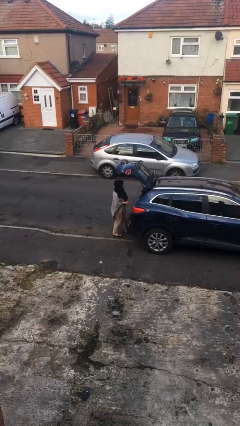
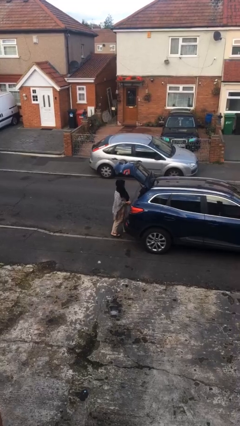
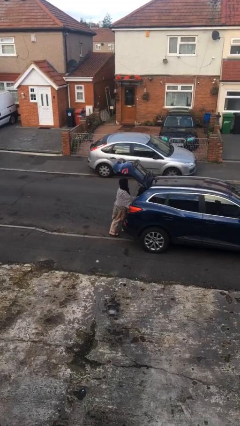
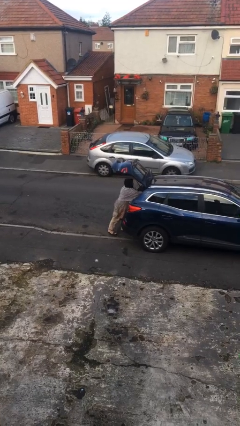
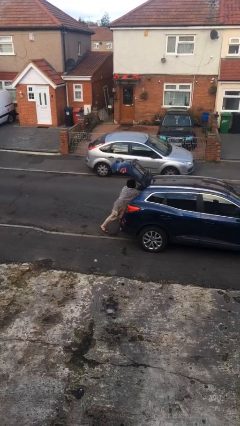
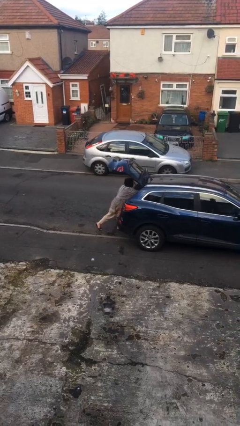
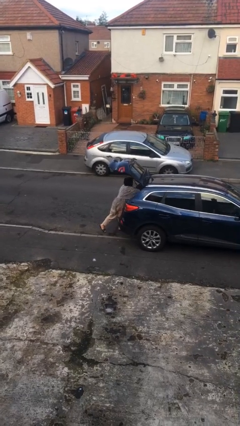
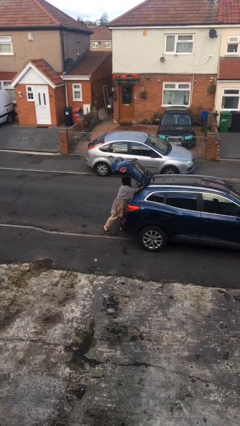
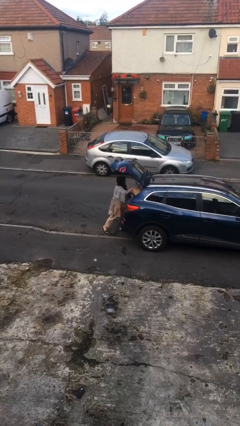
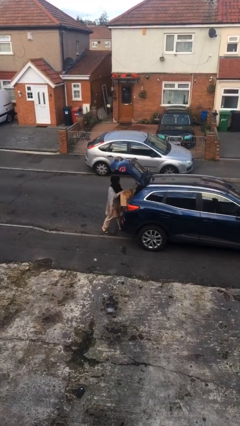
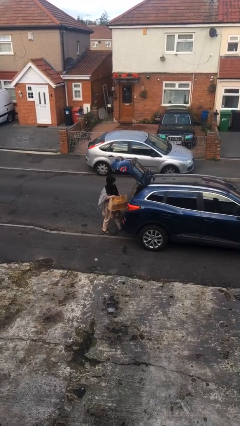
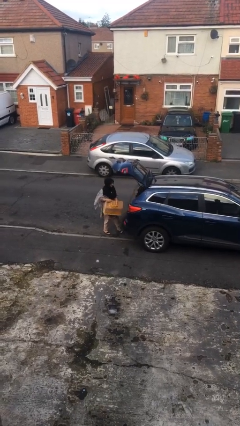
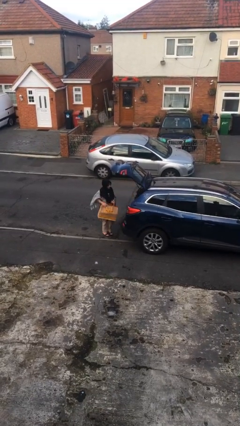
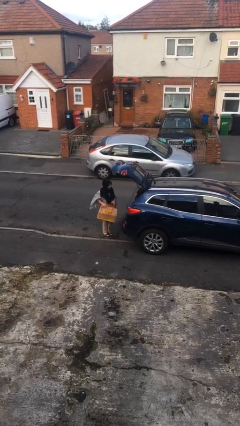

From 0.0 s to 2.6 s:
person unloads car

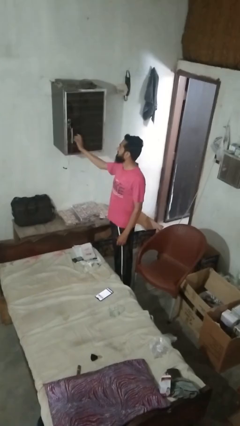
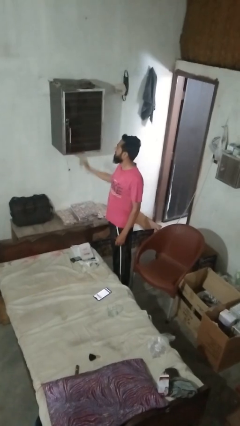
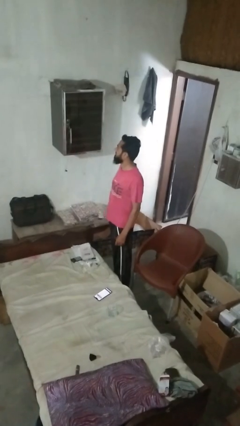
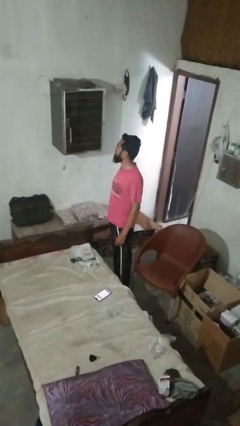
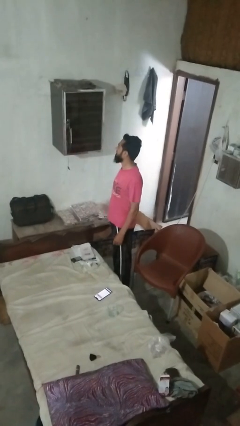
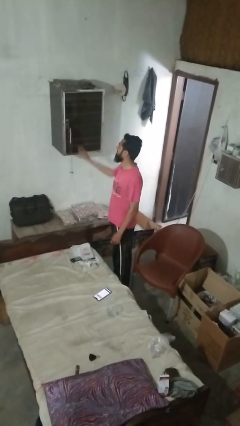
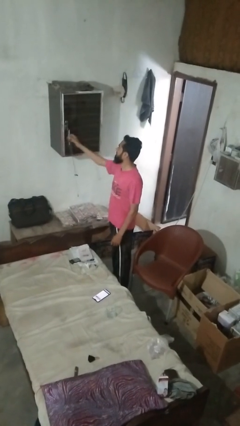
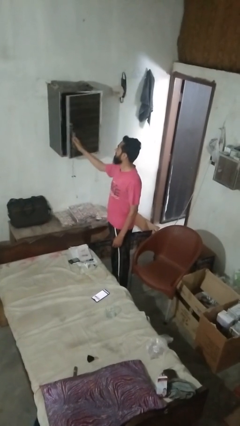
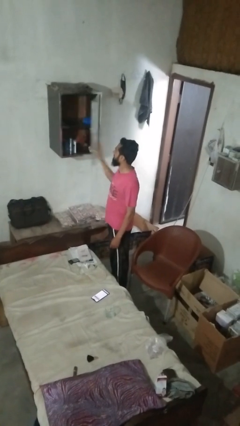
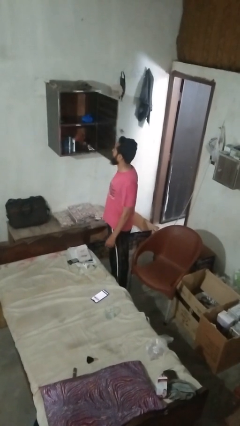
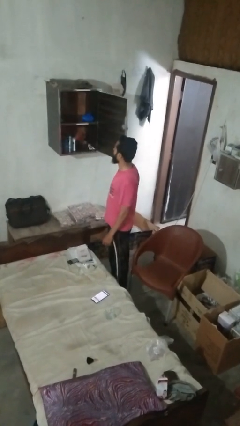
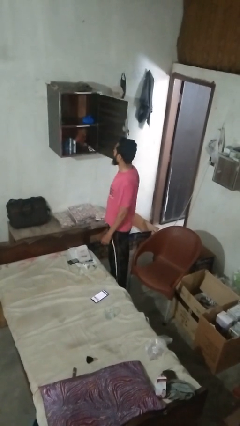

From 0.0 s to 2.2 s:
person opens dresser drawer

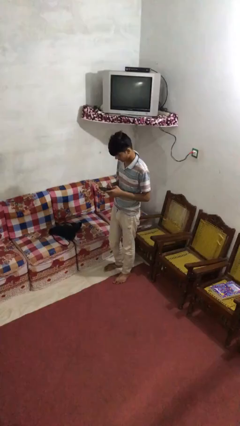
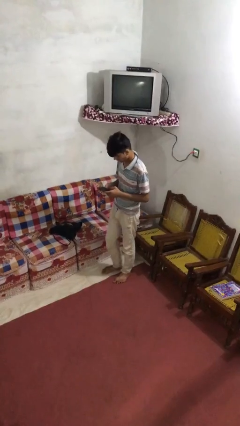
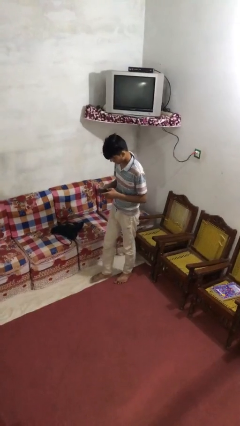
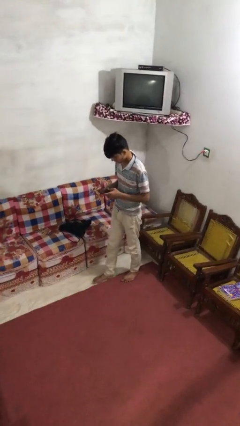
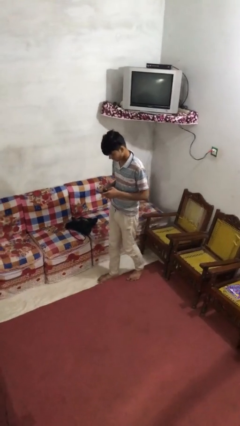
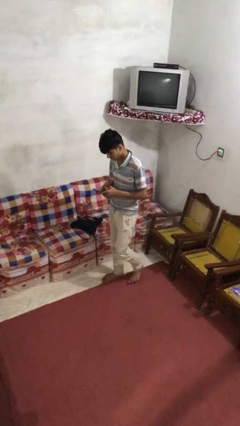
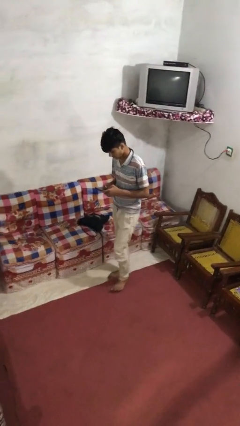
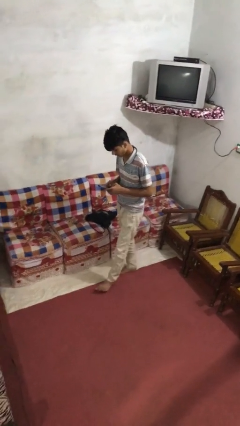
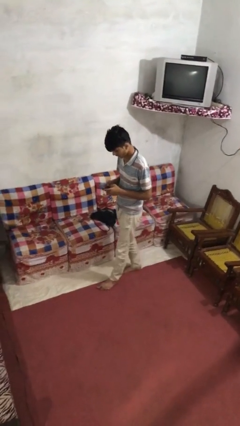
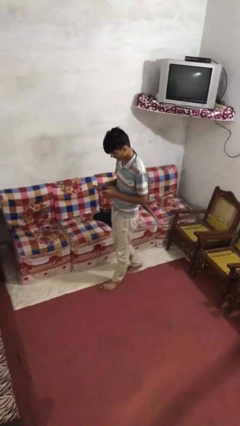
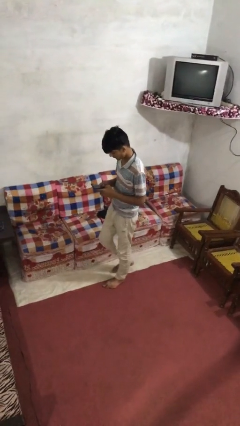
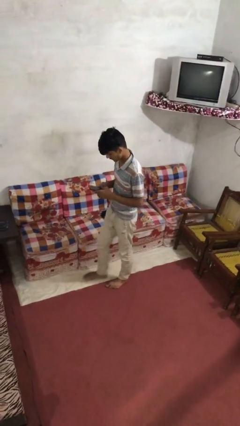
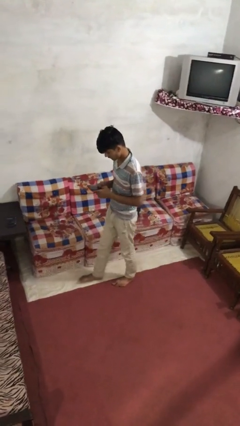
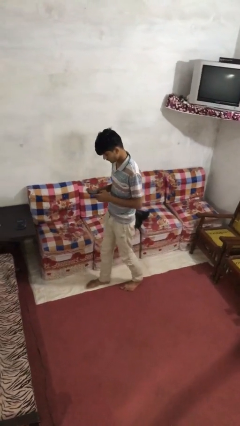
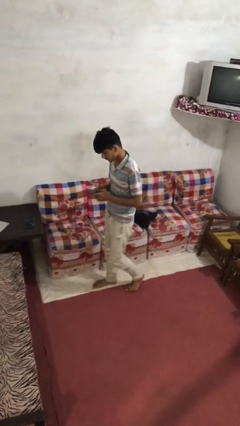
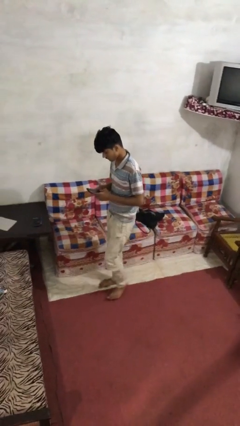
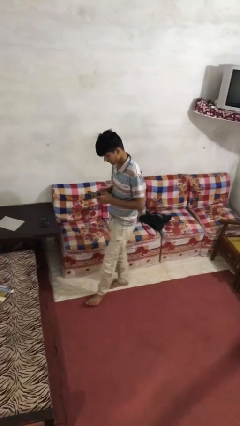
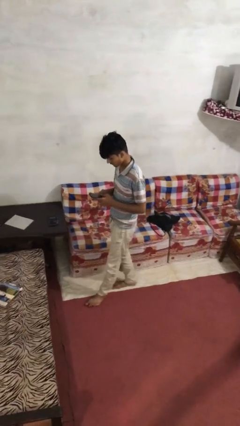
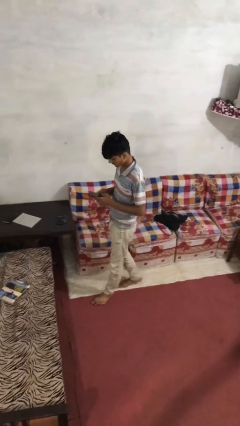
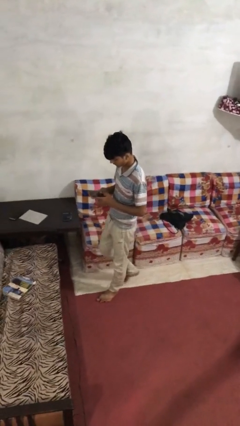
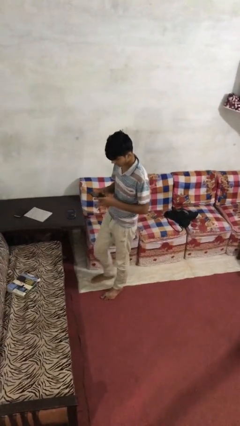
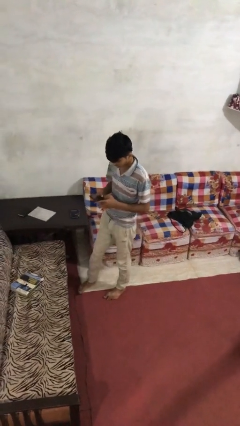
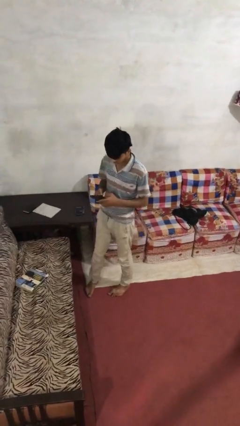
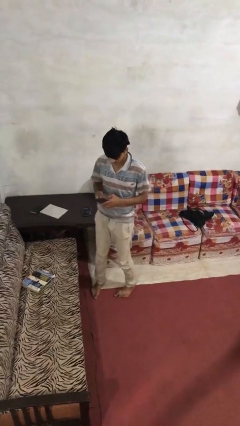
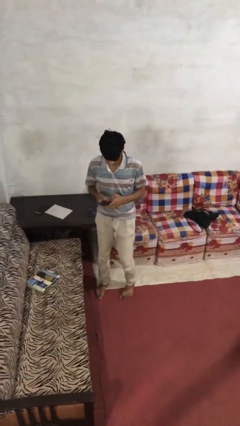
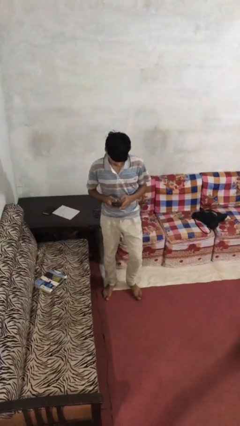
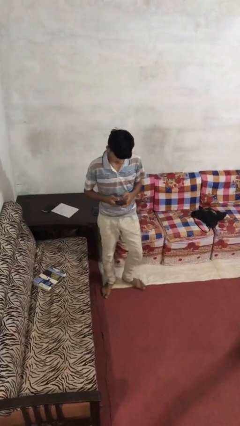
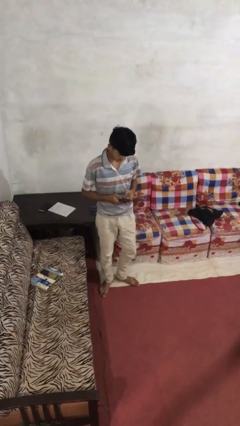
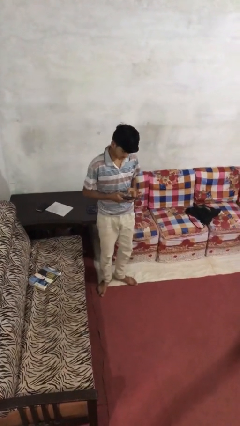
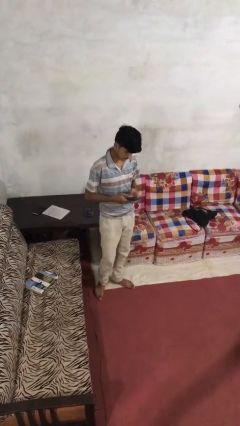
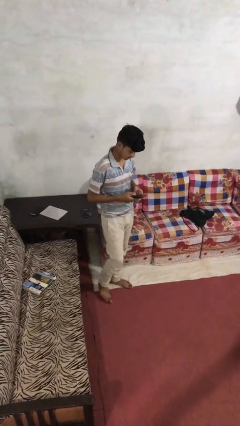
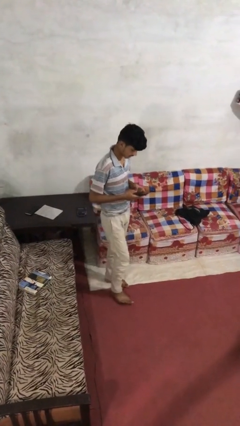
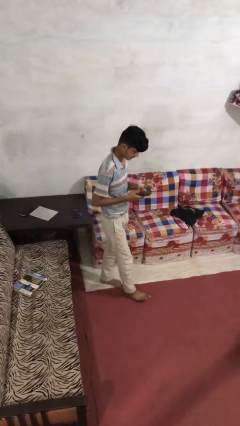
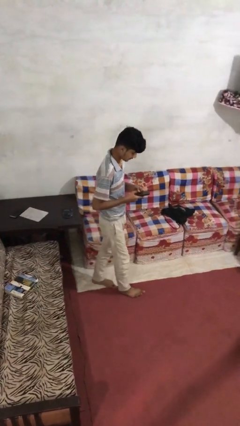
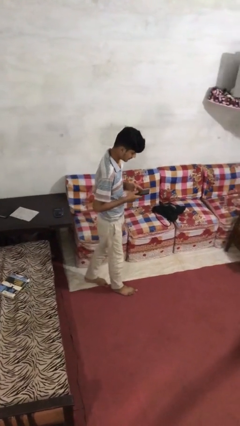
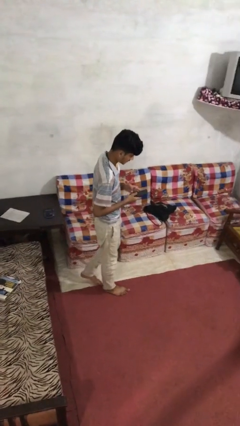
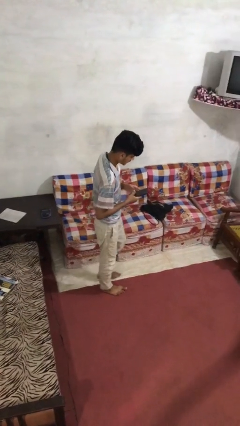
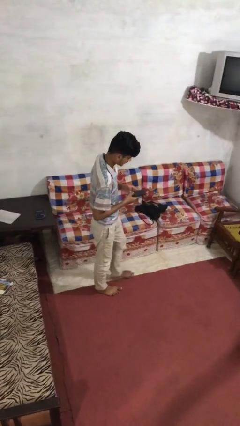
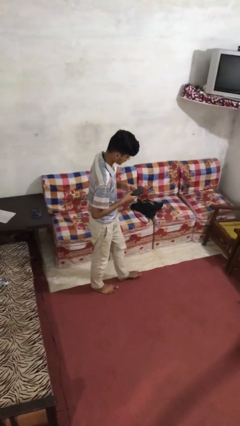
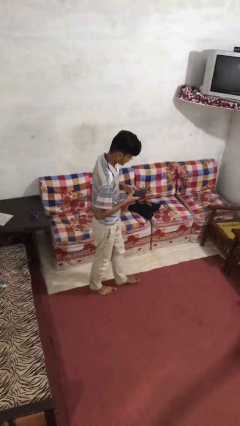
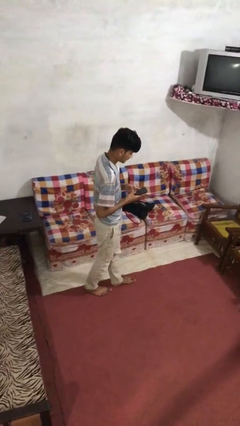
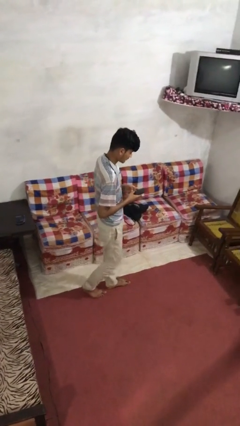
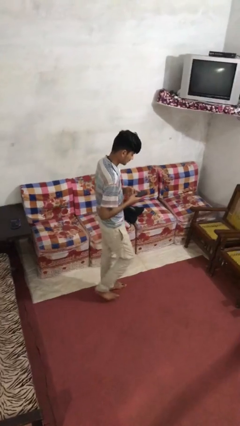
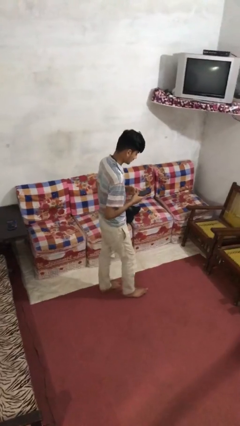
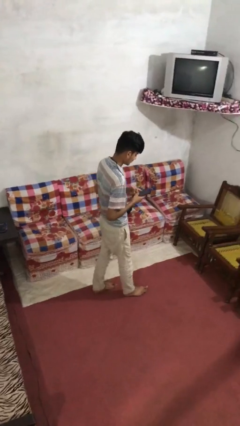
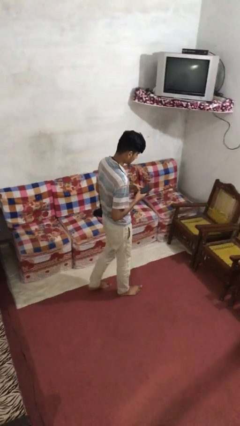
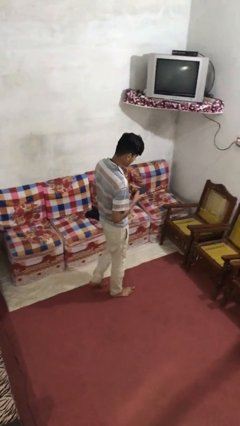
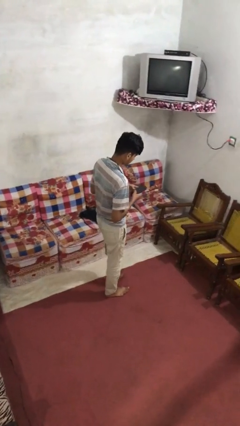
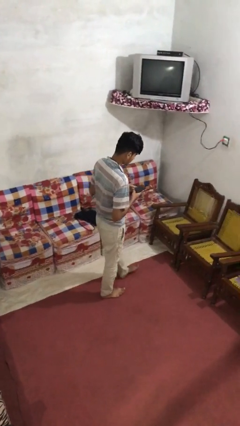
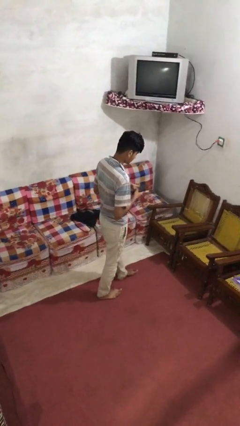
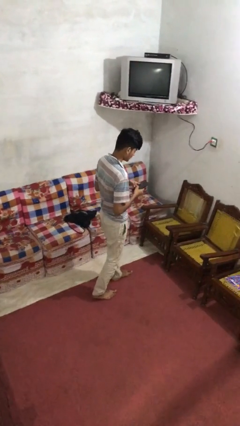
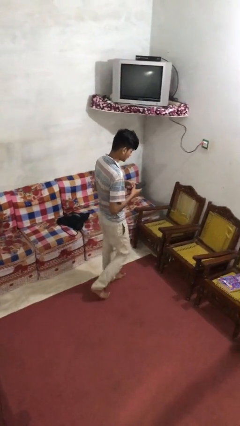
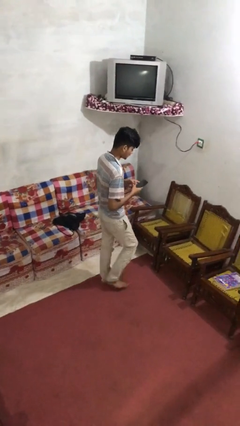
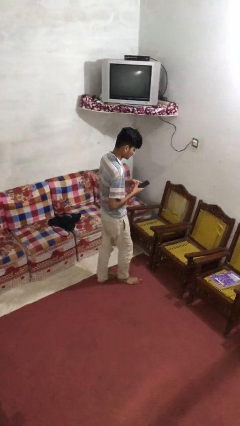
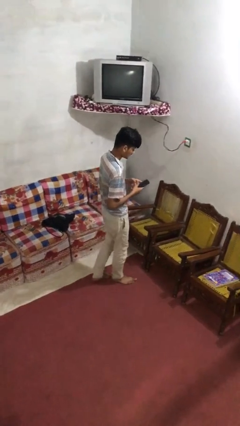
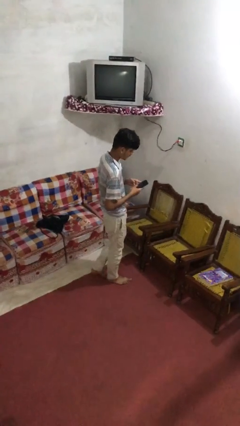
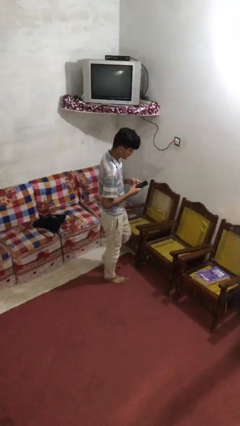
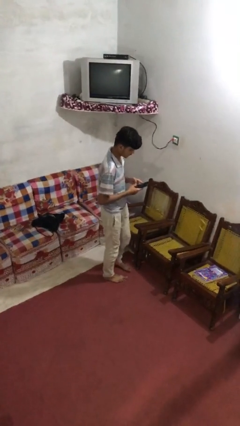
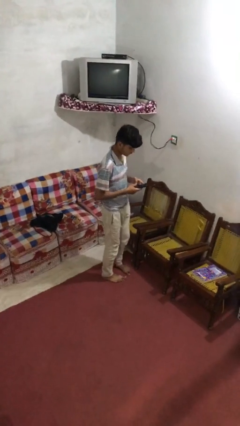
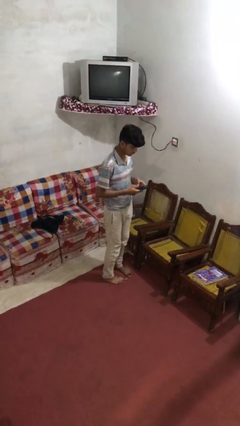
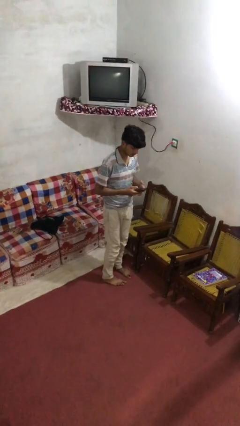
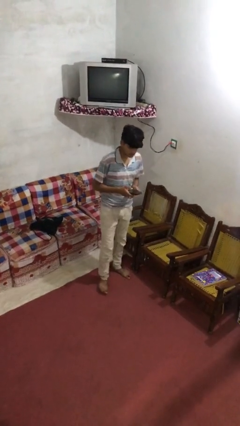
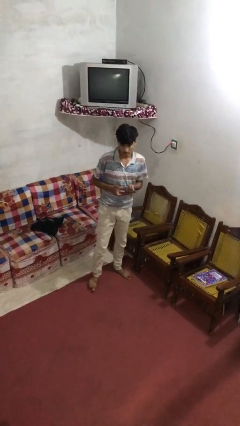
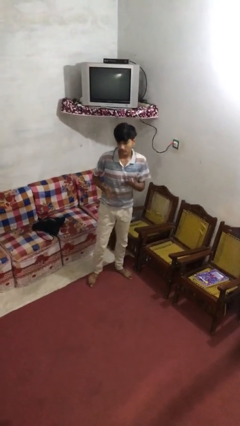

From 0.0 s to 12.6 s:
person texts on phone

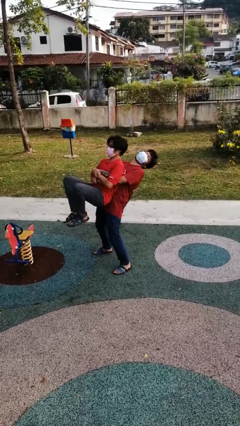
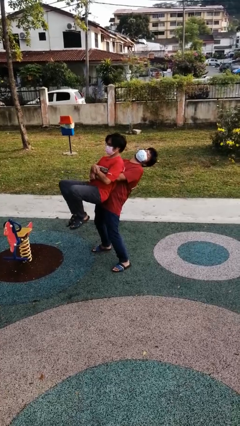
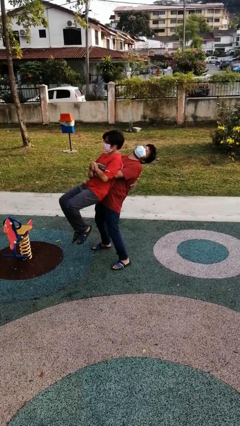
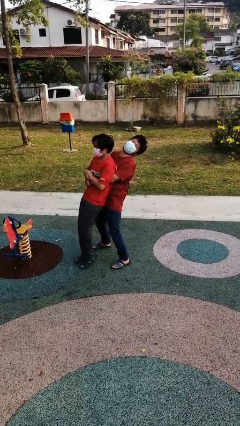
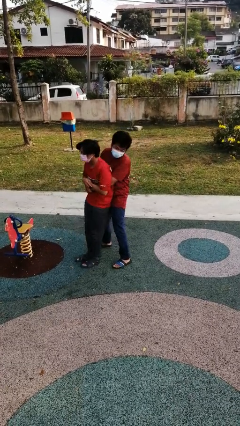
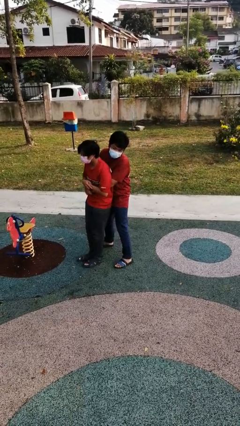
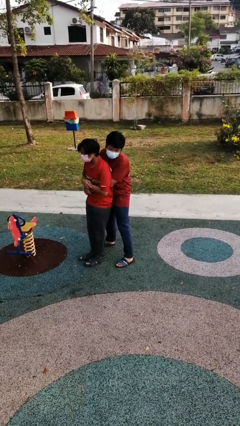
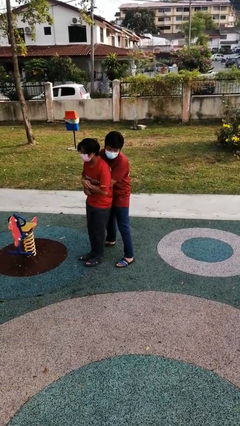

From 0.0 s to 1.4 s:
person puts down person
